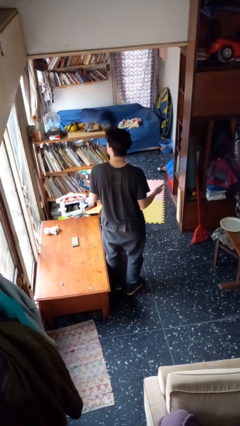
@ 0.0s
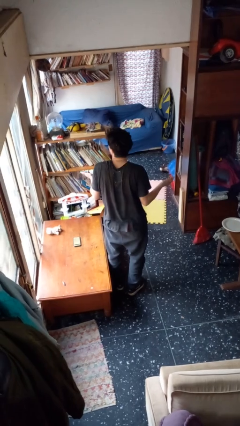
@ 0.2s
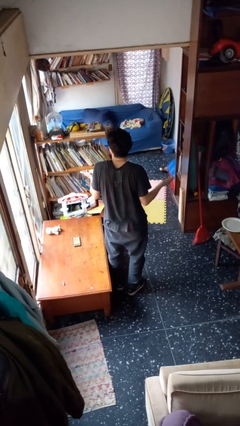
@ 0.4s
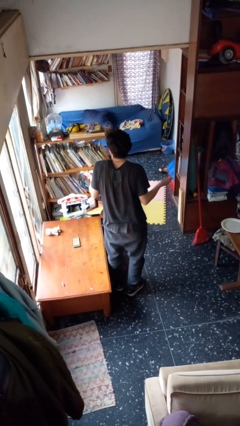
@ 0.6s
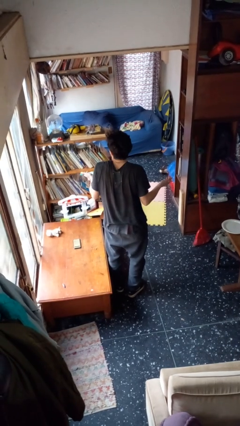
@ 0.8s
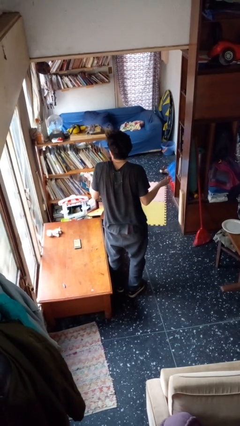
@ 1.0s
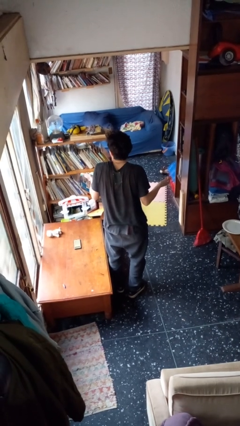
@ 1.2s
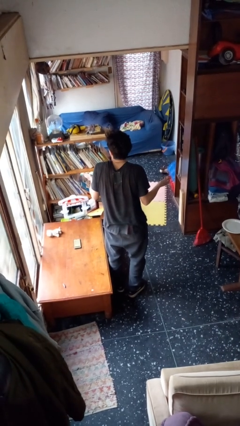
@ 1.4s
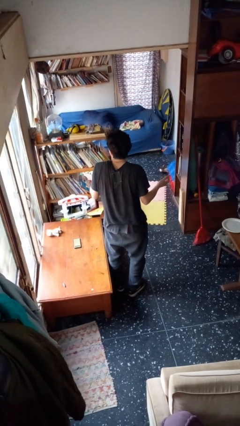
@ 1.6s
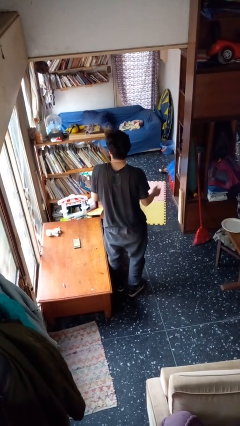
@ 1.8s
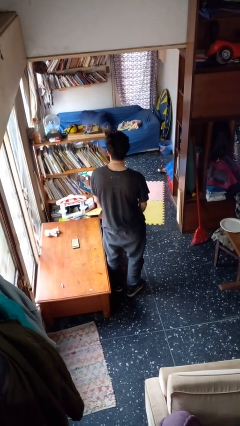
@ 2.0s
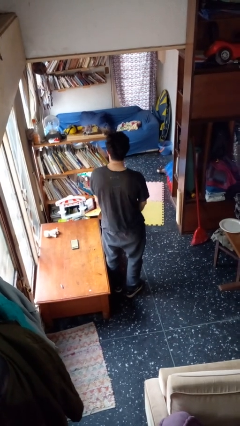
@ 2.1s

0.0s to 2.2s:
person shrugs

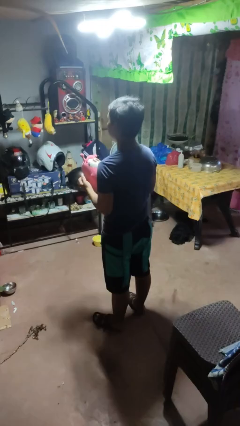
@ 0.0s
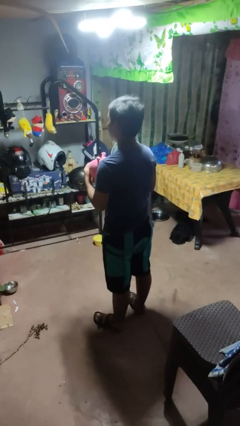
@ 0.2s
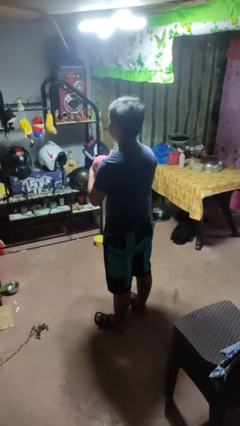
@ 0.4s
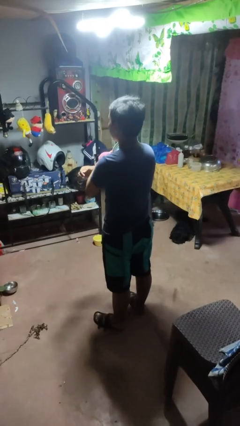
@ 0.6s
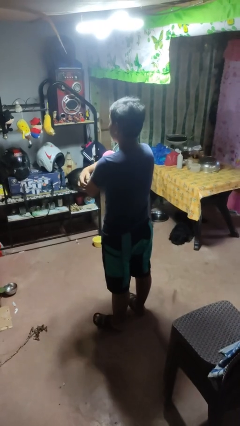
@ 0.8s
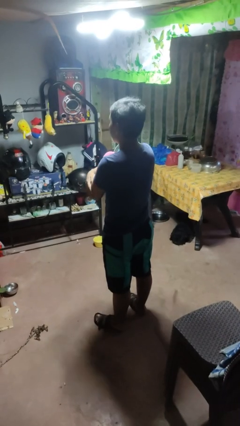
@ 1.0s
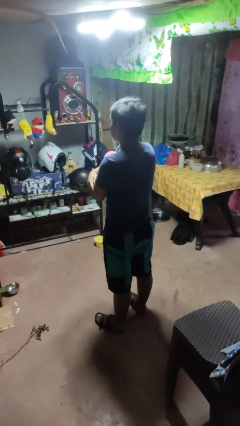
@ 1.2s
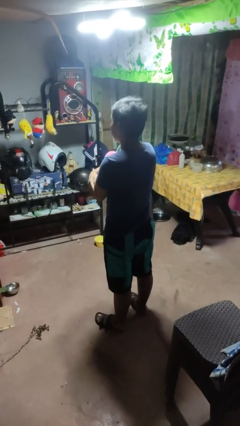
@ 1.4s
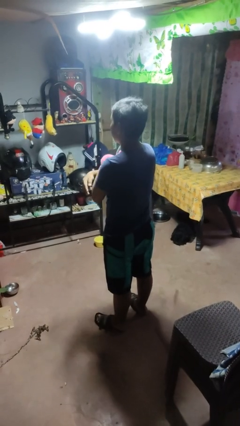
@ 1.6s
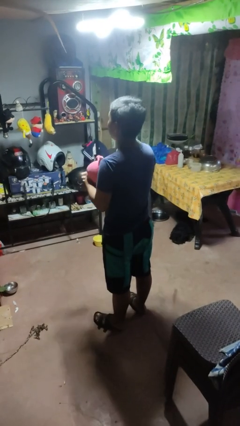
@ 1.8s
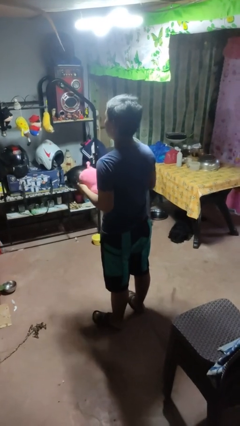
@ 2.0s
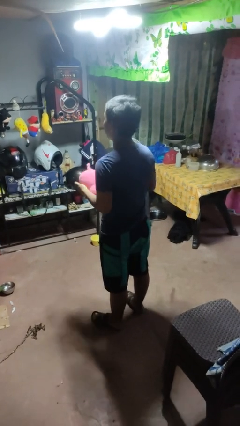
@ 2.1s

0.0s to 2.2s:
person hugs stuffed animal

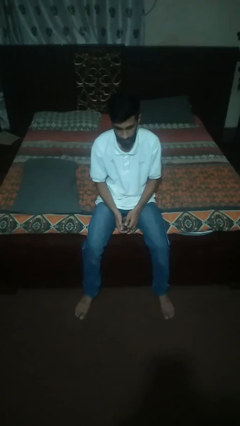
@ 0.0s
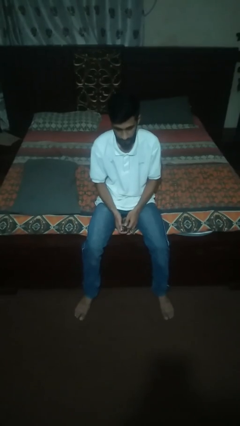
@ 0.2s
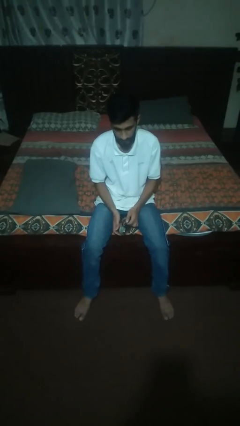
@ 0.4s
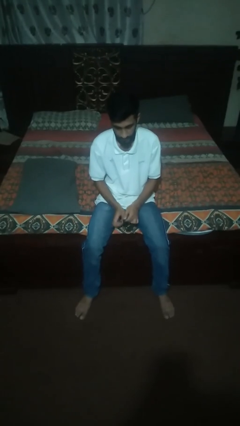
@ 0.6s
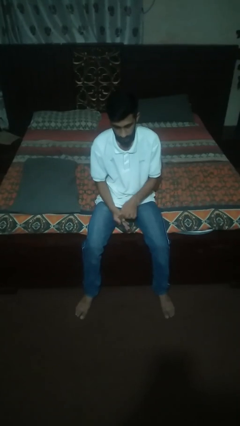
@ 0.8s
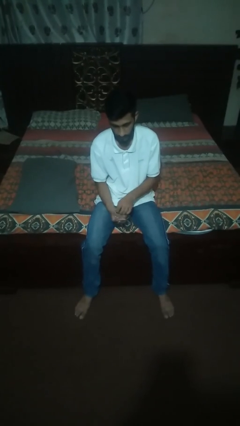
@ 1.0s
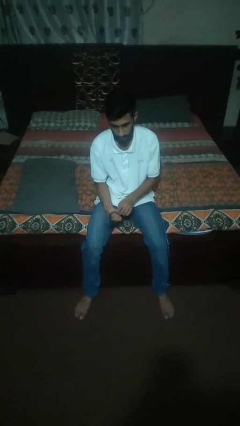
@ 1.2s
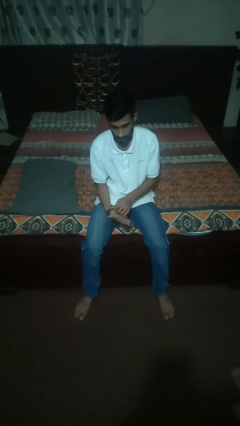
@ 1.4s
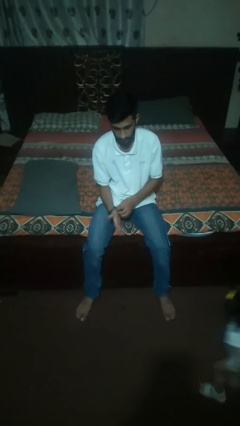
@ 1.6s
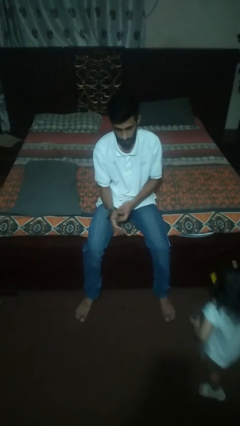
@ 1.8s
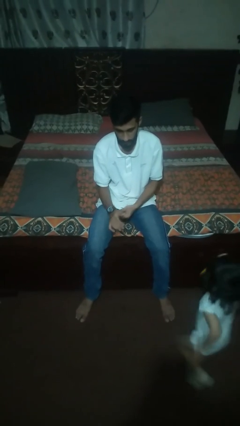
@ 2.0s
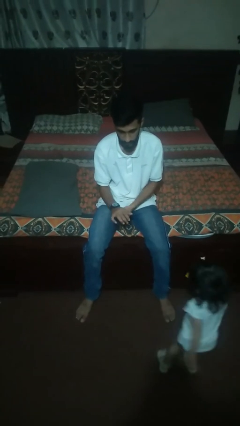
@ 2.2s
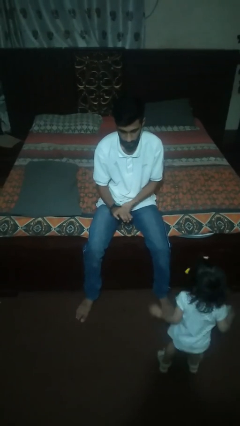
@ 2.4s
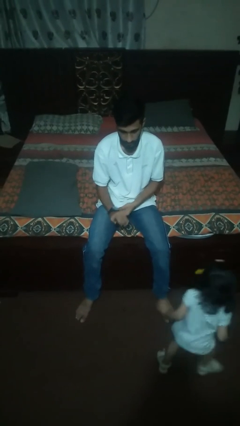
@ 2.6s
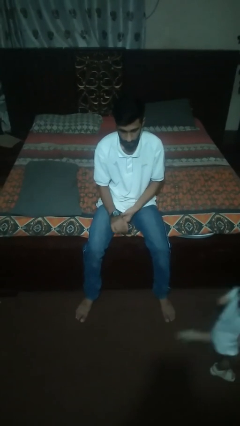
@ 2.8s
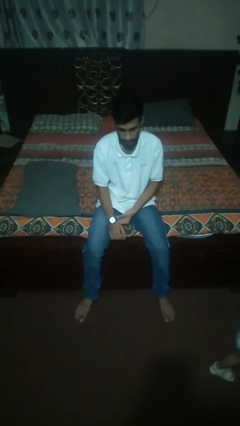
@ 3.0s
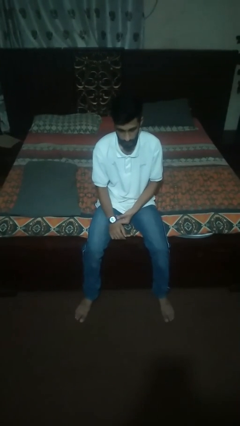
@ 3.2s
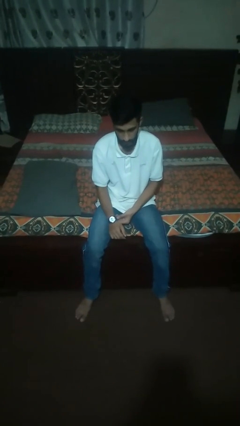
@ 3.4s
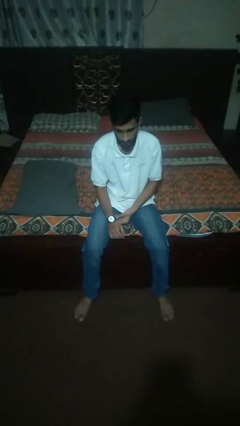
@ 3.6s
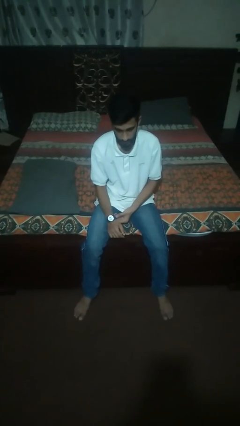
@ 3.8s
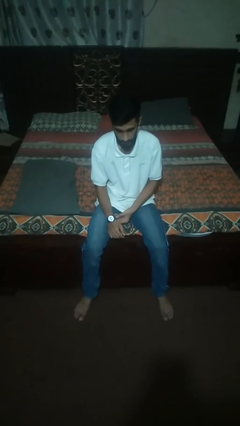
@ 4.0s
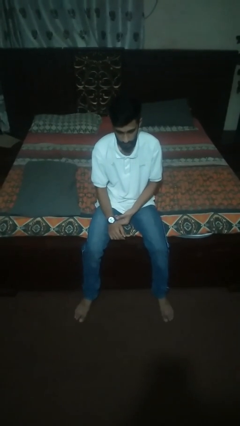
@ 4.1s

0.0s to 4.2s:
person puts on wristwatch

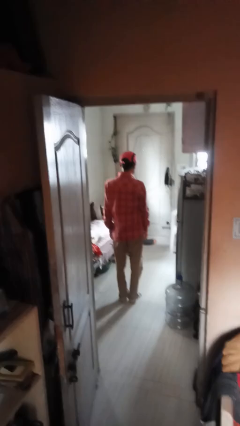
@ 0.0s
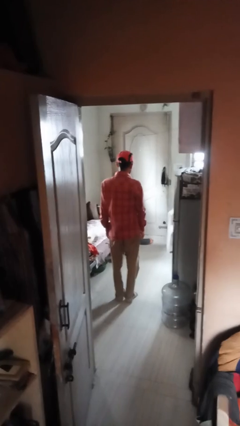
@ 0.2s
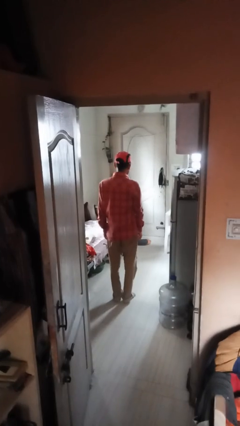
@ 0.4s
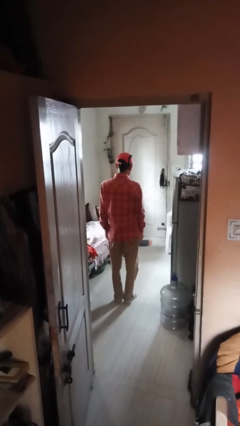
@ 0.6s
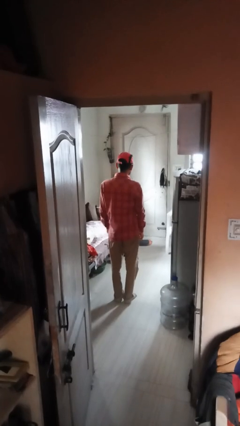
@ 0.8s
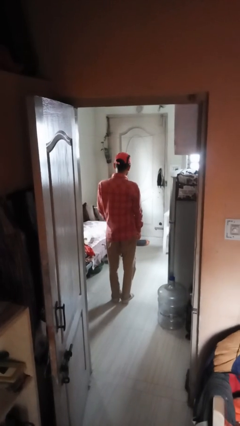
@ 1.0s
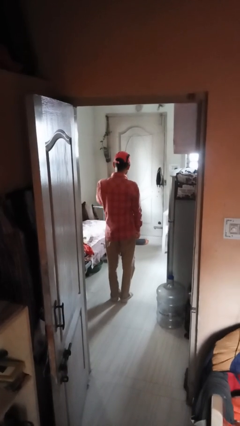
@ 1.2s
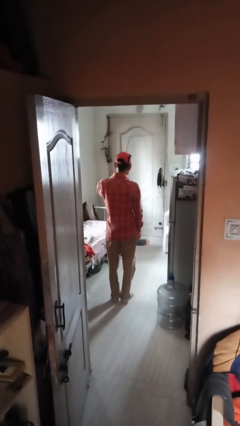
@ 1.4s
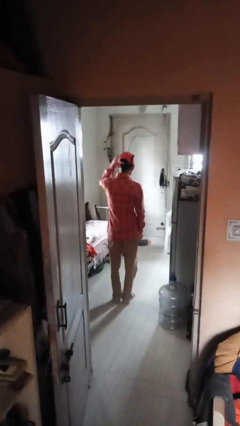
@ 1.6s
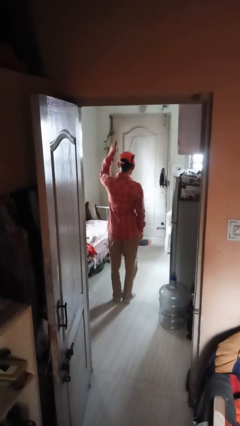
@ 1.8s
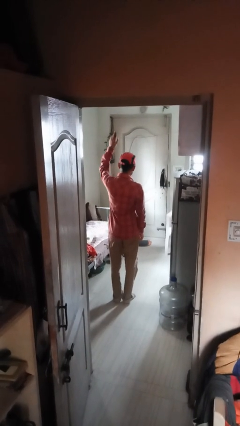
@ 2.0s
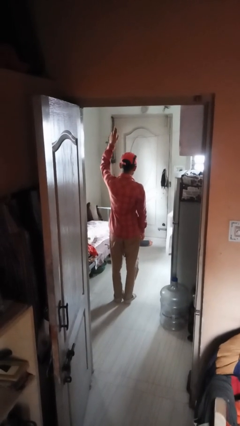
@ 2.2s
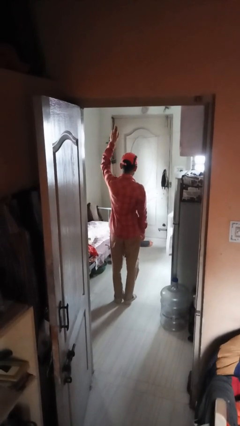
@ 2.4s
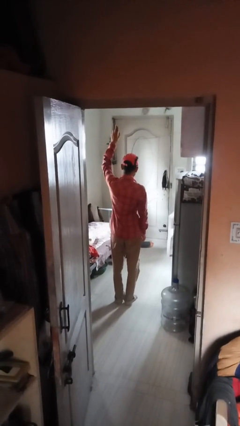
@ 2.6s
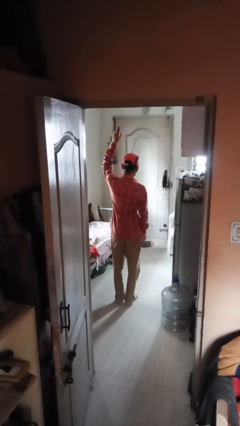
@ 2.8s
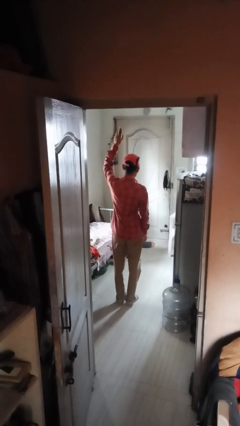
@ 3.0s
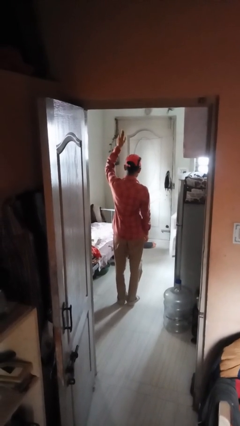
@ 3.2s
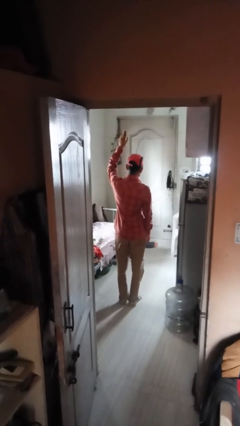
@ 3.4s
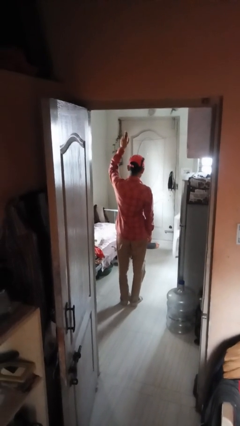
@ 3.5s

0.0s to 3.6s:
person gestures swipe up

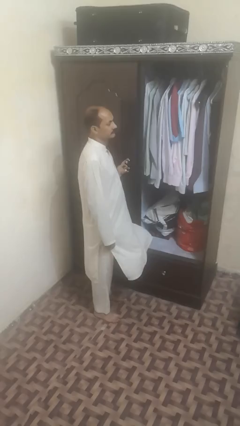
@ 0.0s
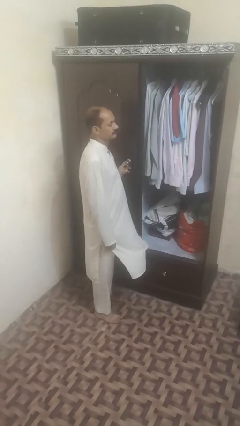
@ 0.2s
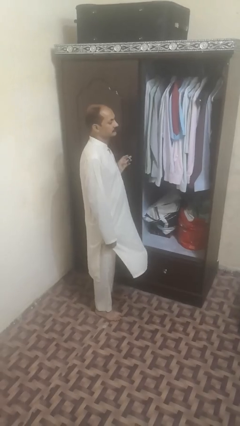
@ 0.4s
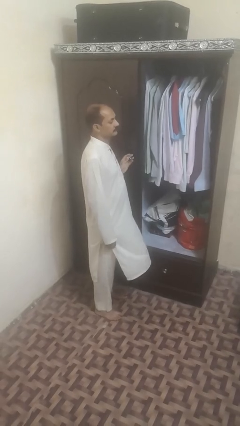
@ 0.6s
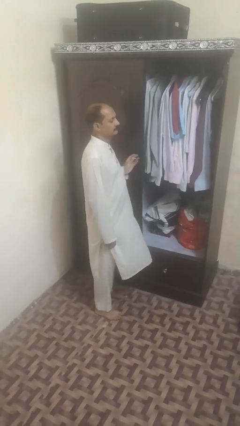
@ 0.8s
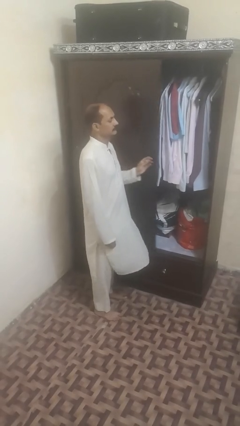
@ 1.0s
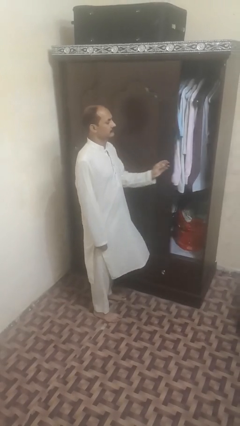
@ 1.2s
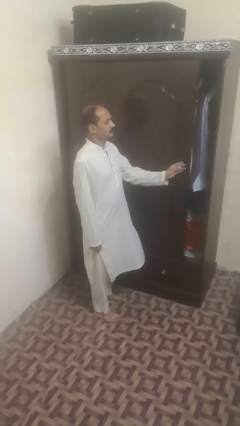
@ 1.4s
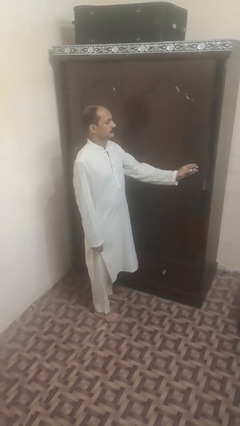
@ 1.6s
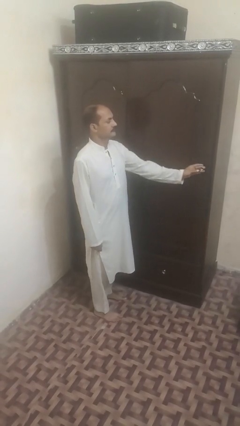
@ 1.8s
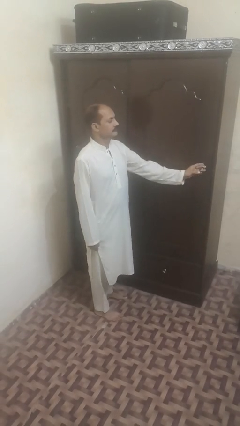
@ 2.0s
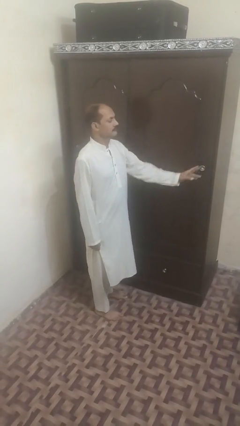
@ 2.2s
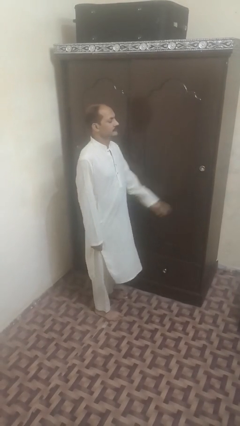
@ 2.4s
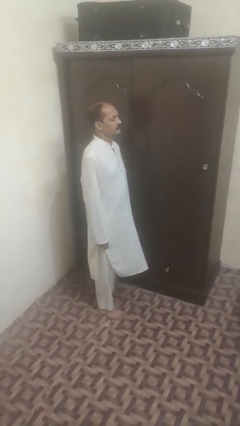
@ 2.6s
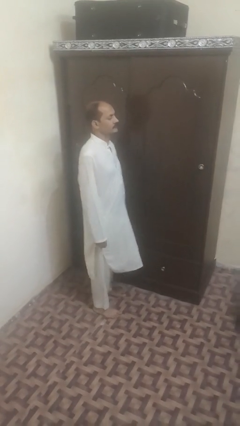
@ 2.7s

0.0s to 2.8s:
person closes sliding door

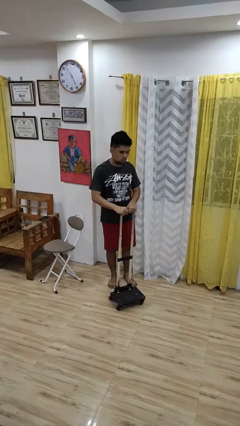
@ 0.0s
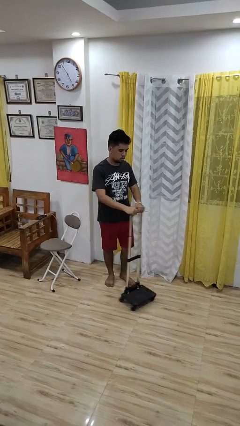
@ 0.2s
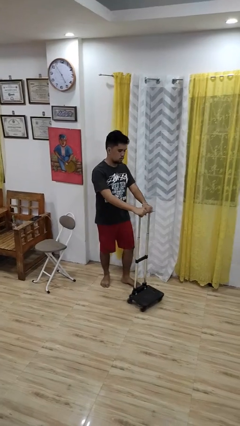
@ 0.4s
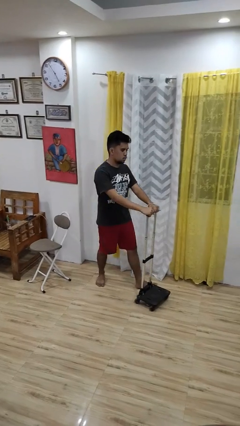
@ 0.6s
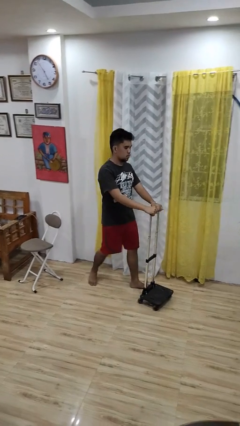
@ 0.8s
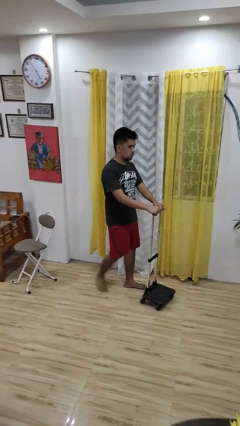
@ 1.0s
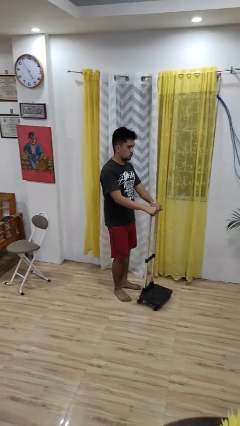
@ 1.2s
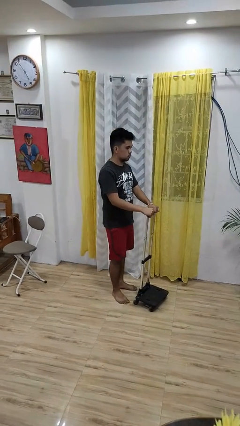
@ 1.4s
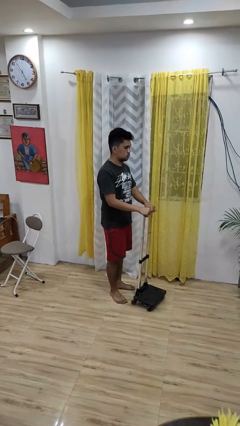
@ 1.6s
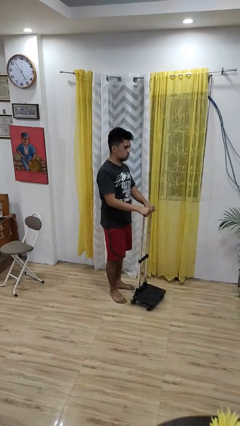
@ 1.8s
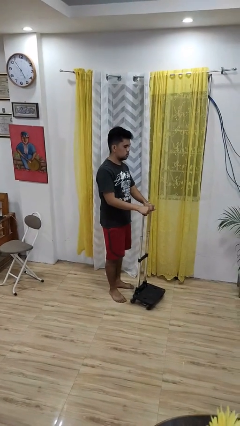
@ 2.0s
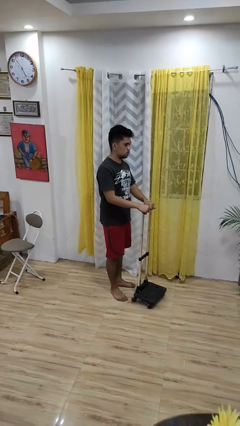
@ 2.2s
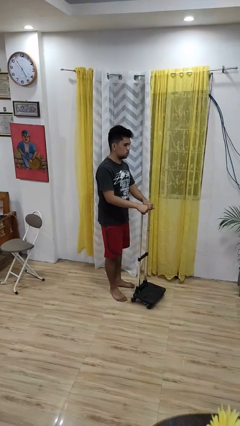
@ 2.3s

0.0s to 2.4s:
person pushes wheeled cart
